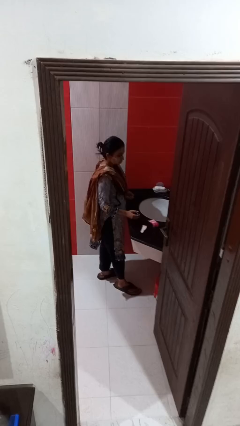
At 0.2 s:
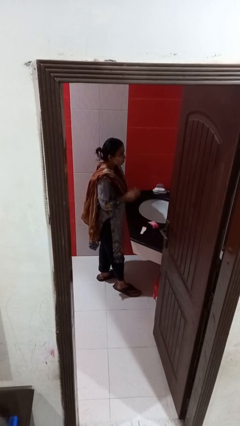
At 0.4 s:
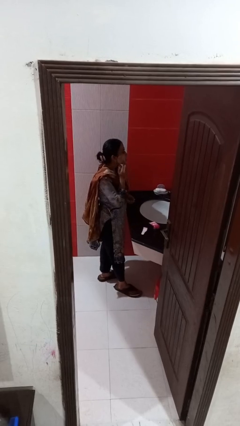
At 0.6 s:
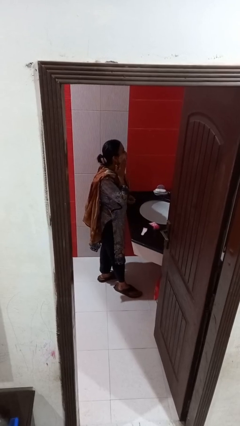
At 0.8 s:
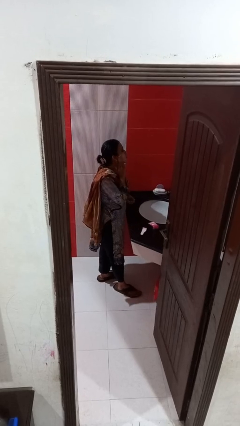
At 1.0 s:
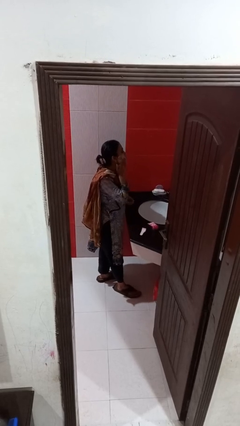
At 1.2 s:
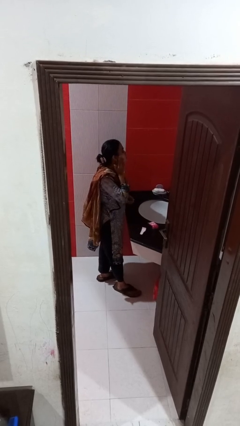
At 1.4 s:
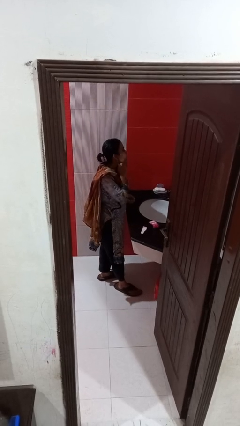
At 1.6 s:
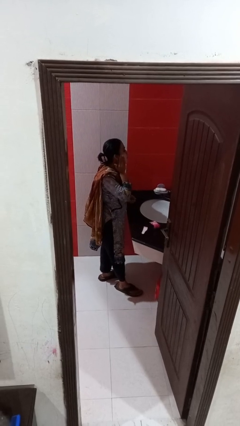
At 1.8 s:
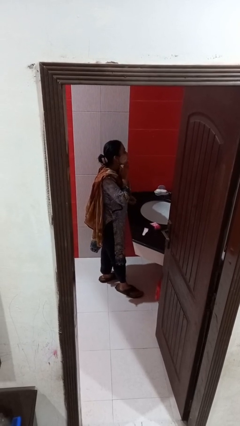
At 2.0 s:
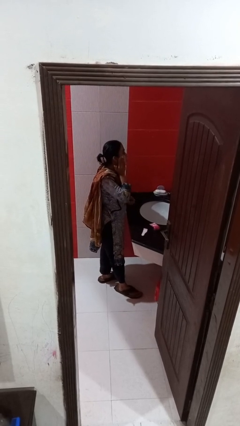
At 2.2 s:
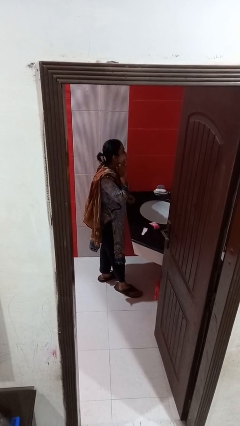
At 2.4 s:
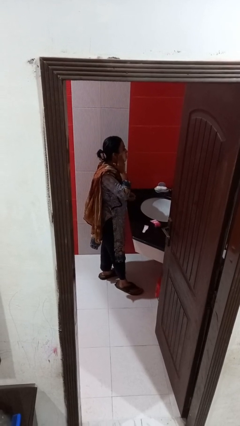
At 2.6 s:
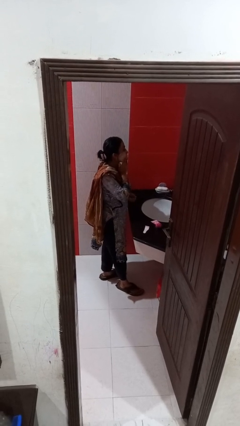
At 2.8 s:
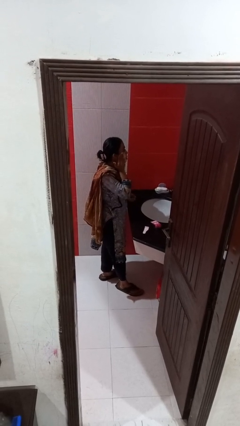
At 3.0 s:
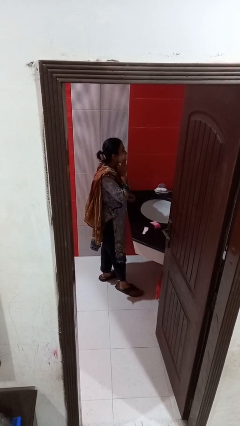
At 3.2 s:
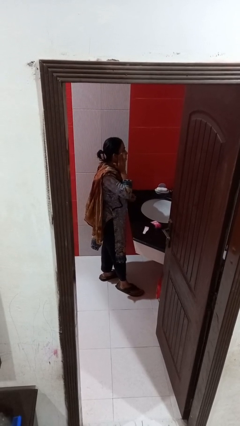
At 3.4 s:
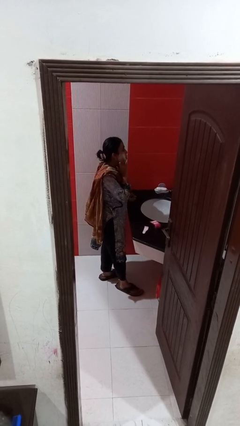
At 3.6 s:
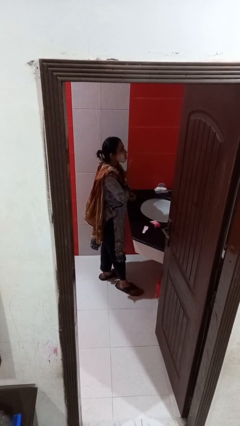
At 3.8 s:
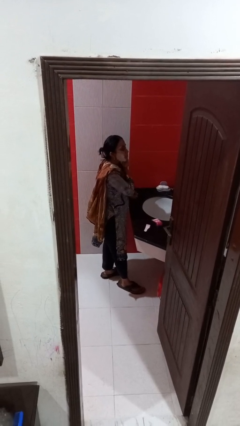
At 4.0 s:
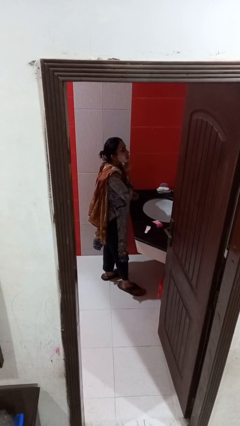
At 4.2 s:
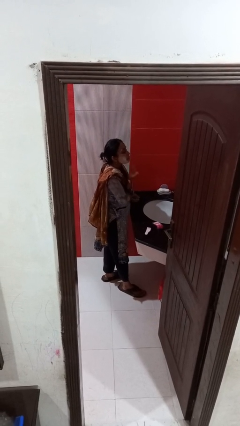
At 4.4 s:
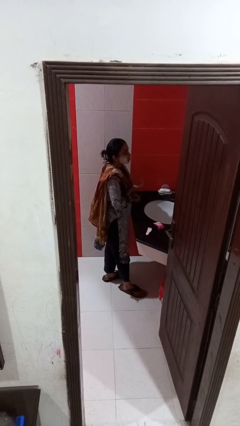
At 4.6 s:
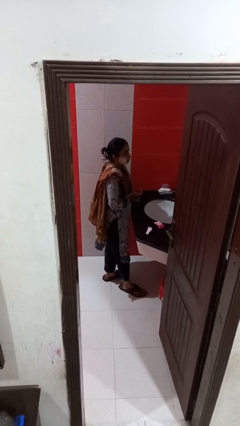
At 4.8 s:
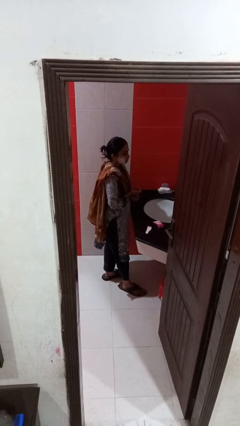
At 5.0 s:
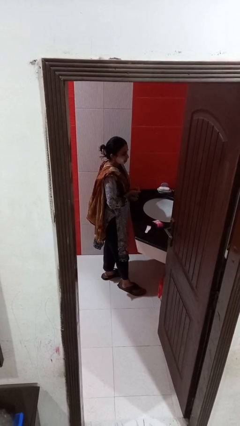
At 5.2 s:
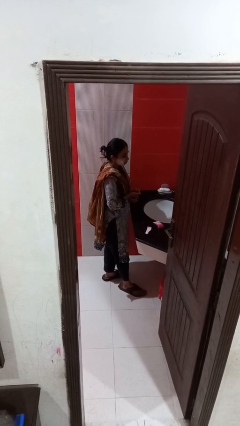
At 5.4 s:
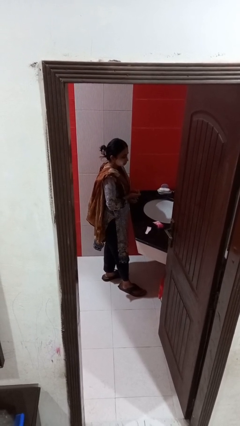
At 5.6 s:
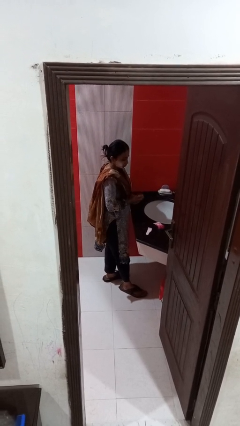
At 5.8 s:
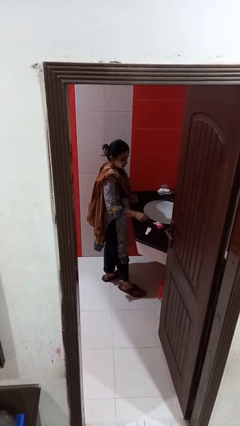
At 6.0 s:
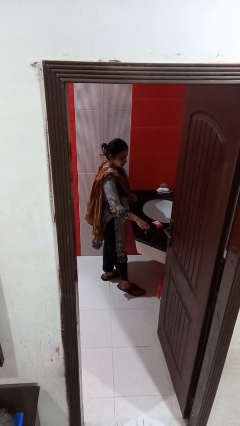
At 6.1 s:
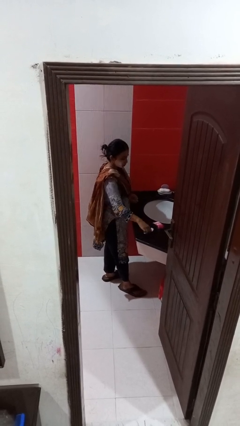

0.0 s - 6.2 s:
person applies shaving cream

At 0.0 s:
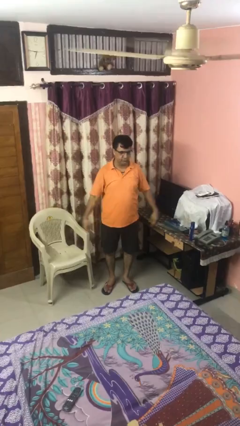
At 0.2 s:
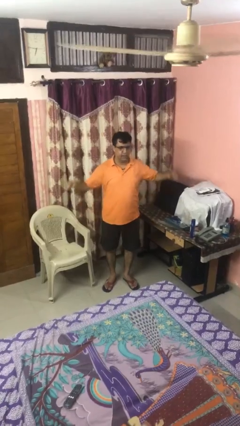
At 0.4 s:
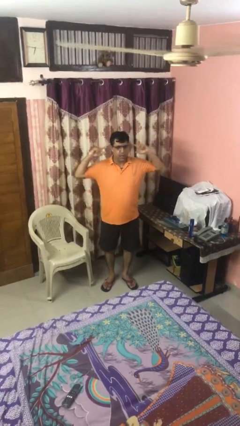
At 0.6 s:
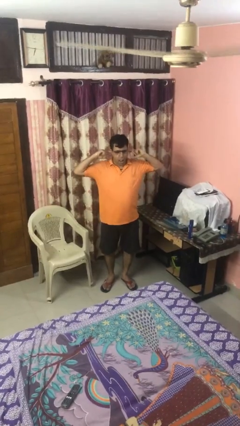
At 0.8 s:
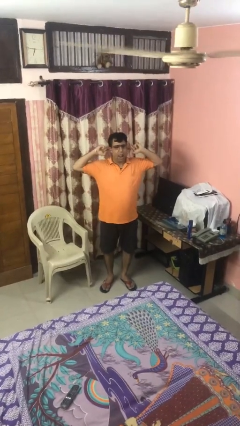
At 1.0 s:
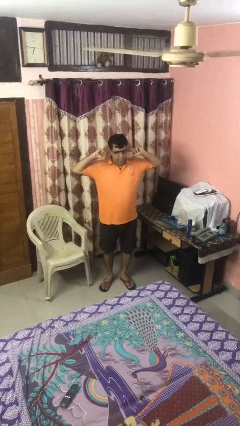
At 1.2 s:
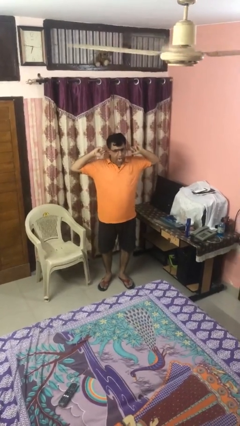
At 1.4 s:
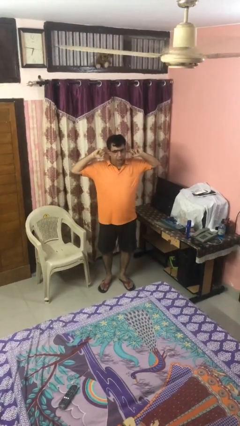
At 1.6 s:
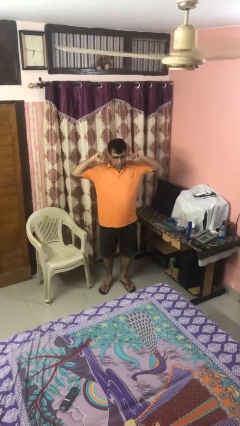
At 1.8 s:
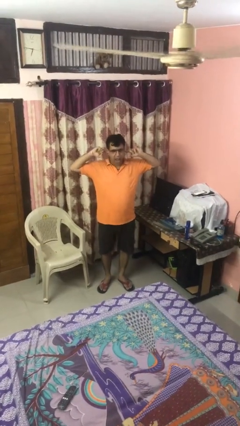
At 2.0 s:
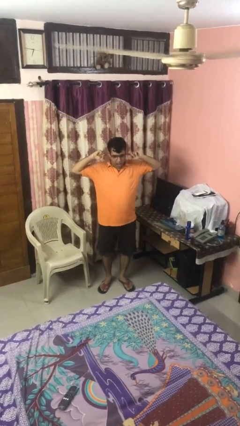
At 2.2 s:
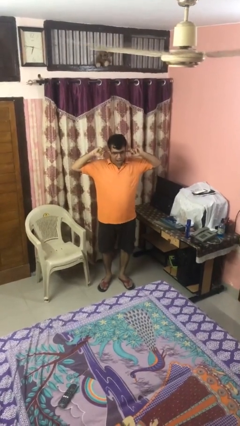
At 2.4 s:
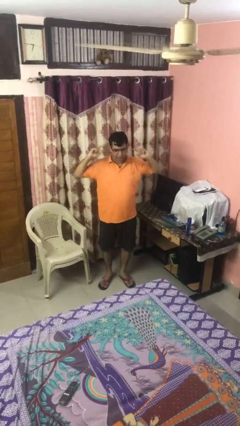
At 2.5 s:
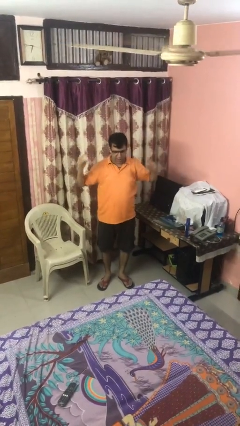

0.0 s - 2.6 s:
person puts fingers in ear

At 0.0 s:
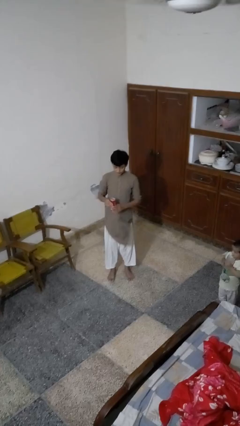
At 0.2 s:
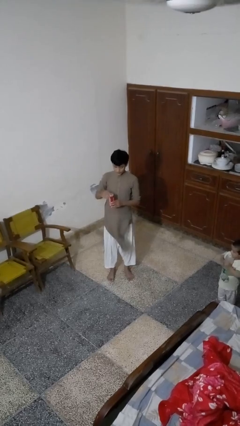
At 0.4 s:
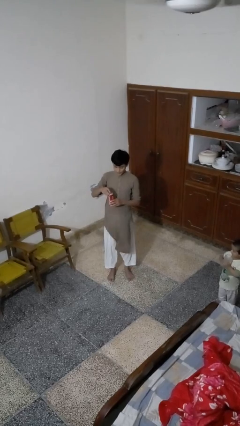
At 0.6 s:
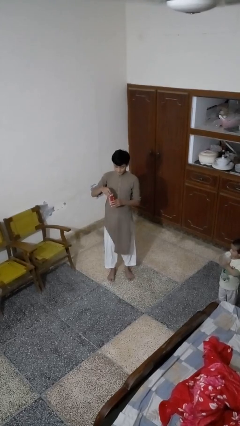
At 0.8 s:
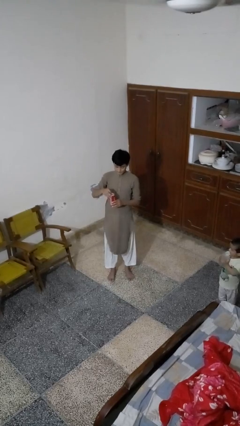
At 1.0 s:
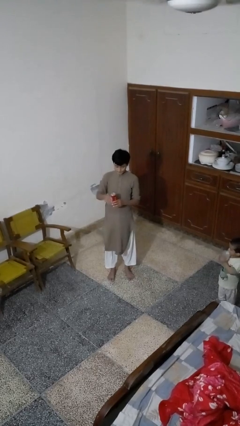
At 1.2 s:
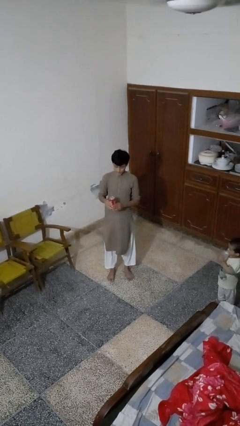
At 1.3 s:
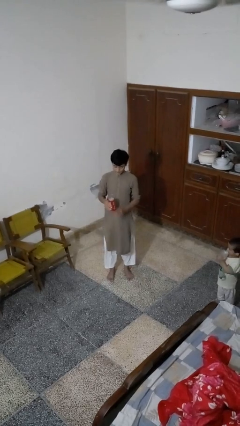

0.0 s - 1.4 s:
person opens beverage can

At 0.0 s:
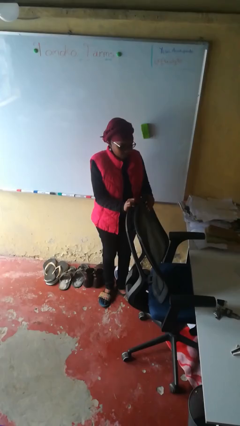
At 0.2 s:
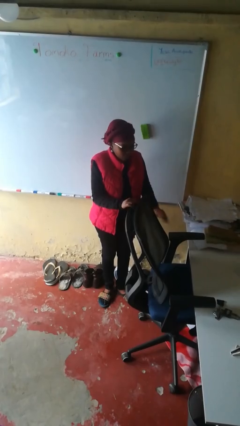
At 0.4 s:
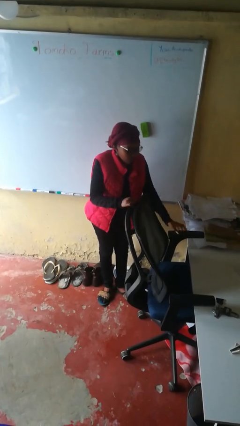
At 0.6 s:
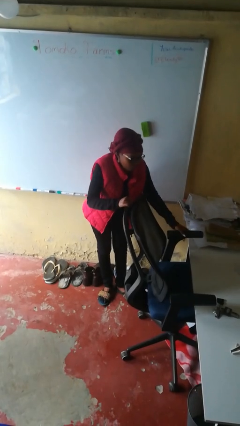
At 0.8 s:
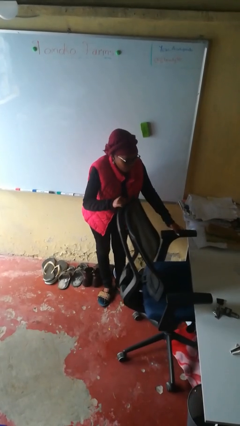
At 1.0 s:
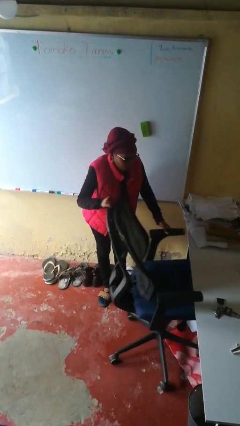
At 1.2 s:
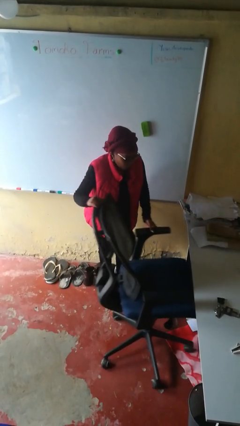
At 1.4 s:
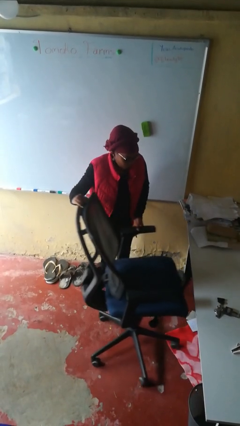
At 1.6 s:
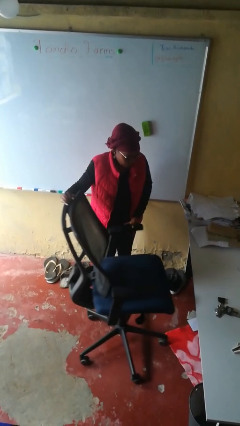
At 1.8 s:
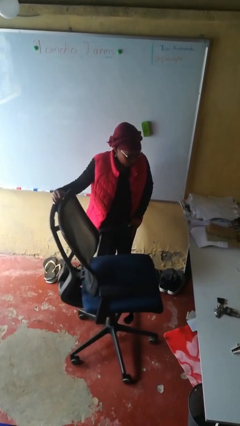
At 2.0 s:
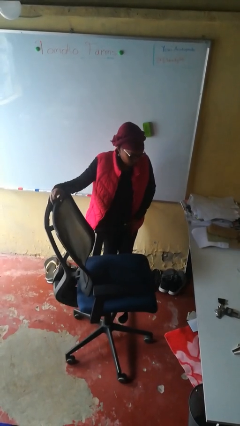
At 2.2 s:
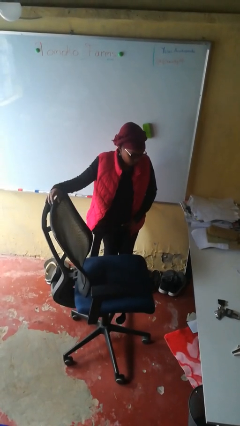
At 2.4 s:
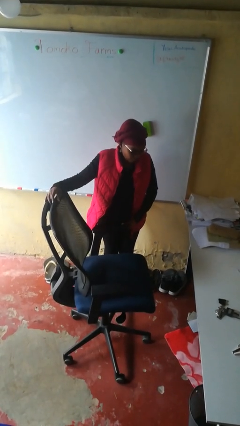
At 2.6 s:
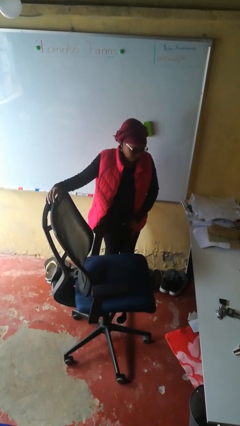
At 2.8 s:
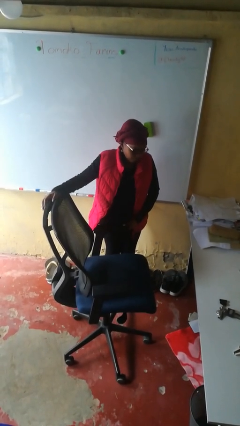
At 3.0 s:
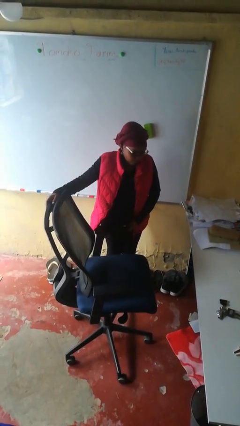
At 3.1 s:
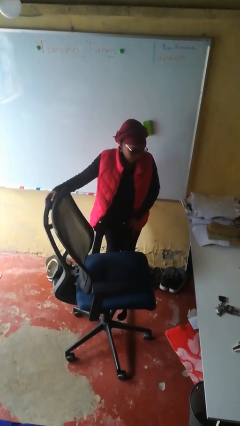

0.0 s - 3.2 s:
person pulls out chair

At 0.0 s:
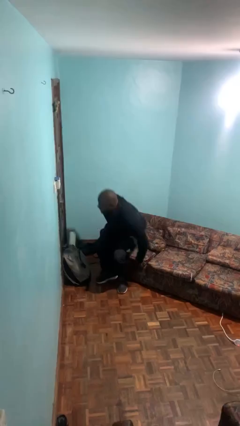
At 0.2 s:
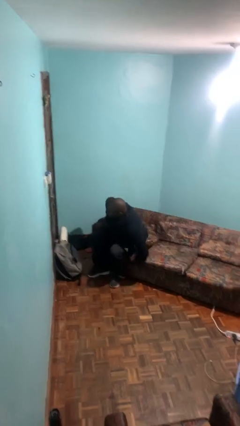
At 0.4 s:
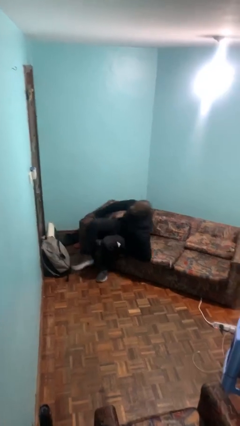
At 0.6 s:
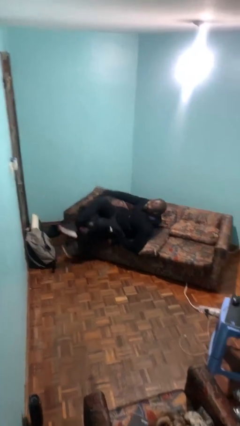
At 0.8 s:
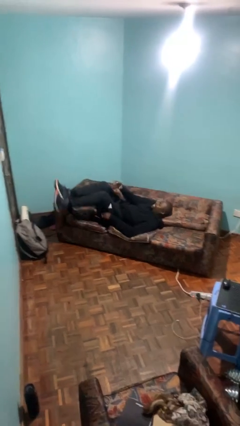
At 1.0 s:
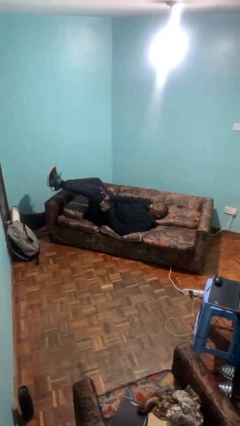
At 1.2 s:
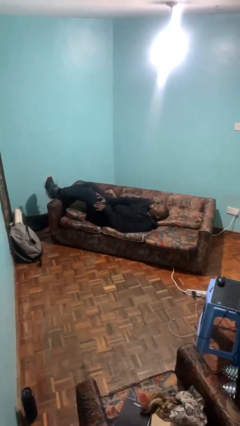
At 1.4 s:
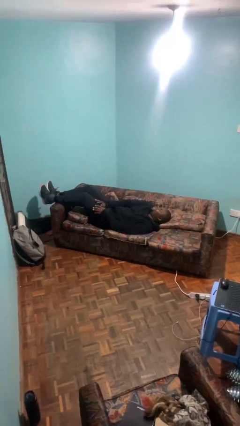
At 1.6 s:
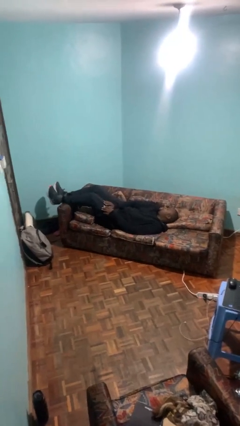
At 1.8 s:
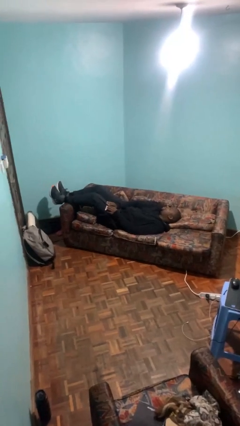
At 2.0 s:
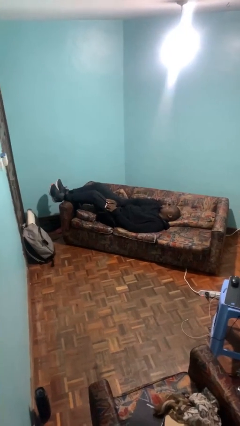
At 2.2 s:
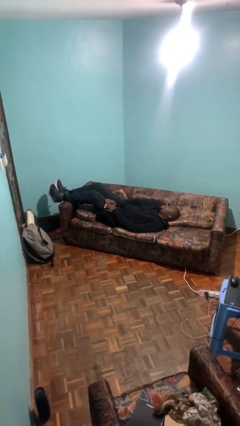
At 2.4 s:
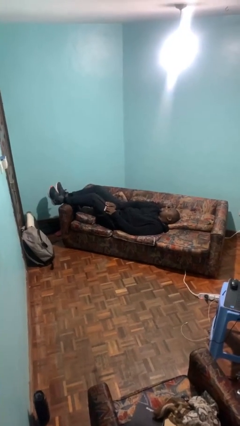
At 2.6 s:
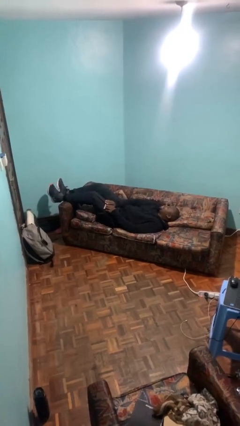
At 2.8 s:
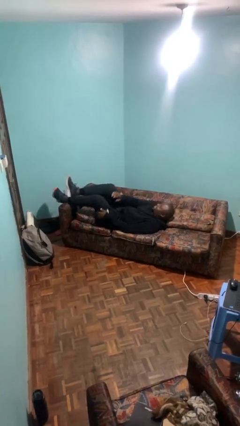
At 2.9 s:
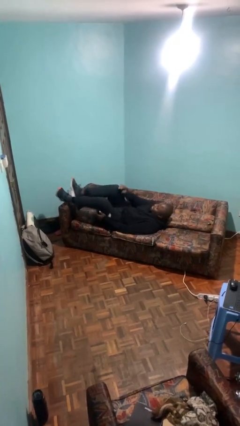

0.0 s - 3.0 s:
person lies down on bed

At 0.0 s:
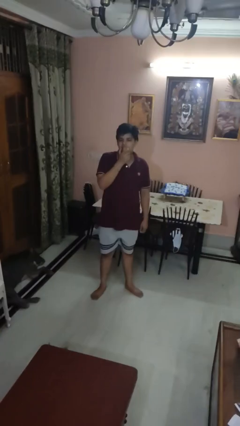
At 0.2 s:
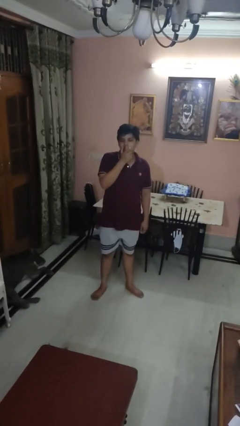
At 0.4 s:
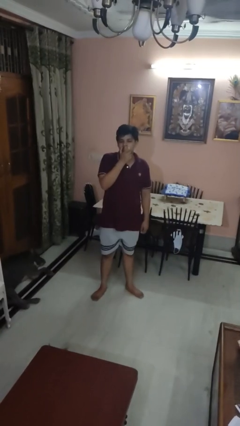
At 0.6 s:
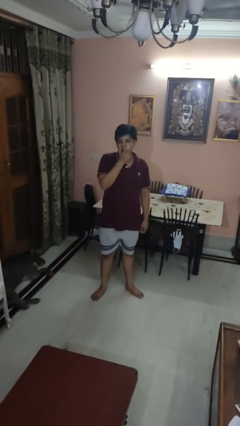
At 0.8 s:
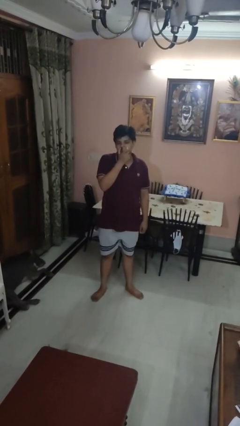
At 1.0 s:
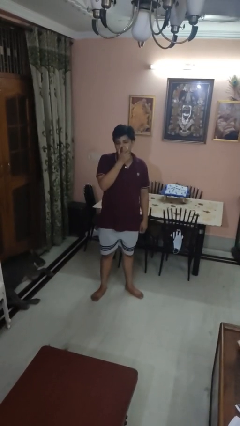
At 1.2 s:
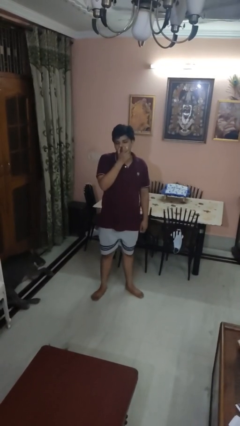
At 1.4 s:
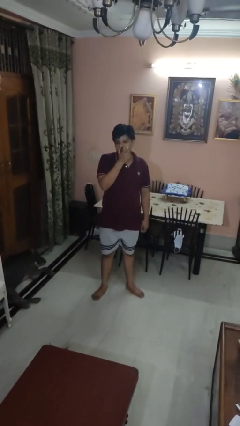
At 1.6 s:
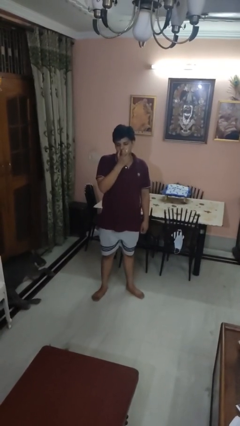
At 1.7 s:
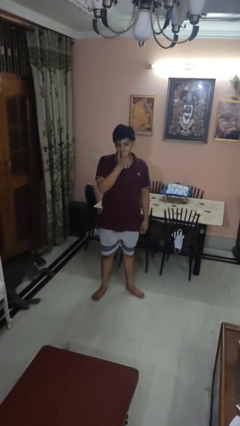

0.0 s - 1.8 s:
person eats apple
